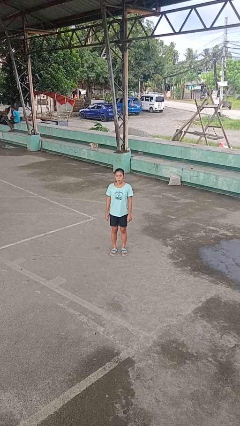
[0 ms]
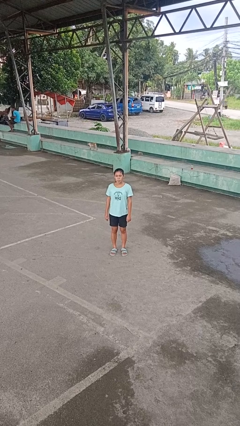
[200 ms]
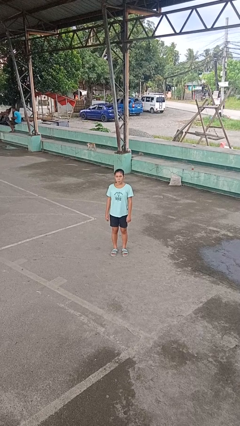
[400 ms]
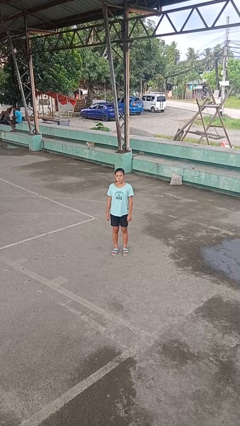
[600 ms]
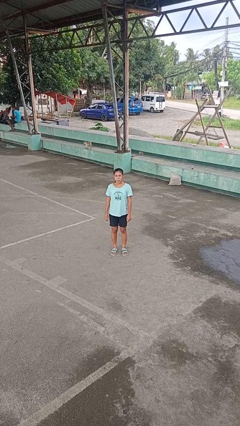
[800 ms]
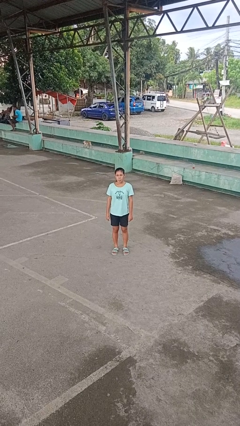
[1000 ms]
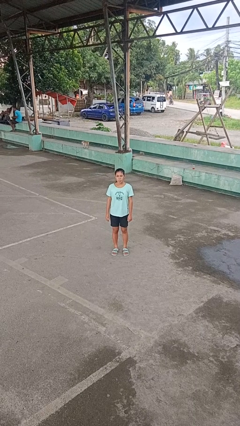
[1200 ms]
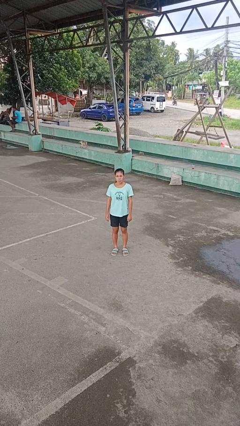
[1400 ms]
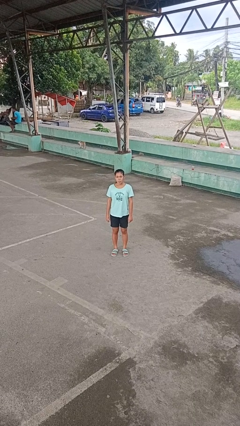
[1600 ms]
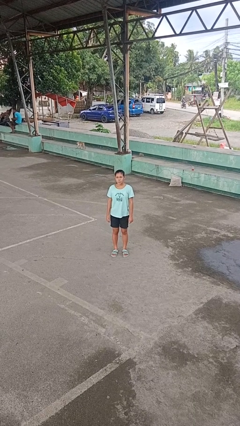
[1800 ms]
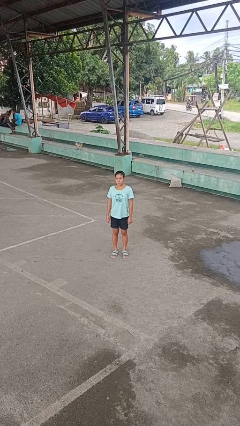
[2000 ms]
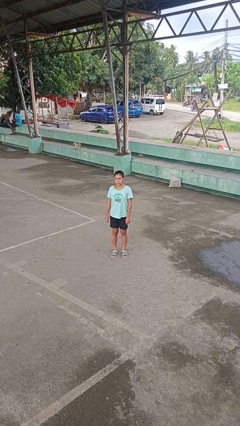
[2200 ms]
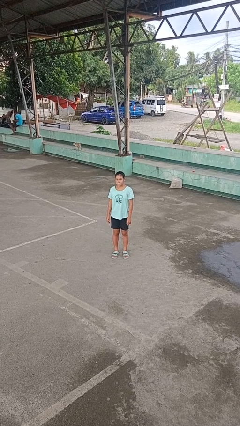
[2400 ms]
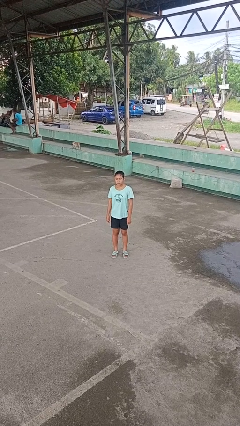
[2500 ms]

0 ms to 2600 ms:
person sticks out tongue

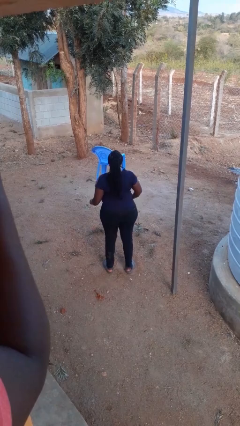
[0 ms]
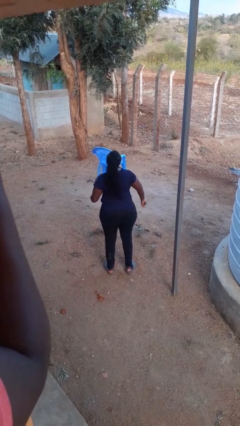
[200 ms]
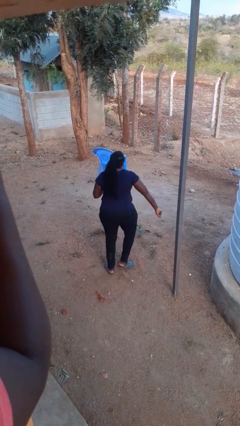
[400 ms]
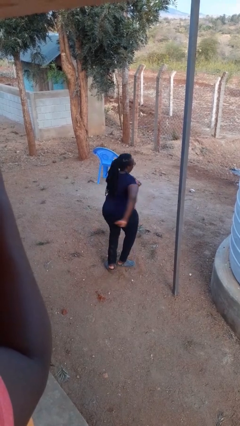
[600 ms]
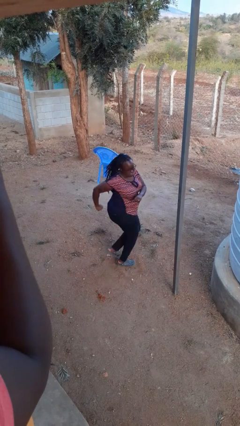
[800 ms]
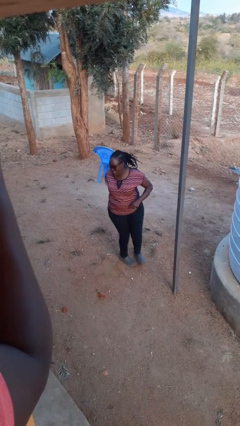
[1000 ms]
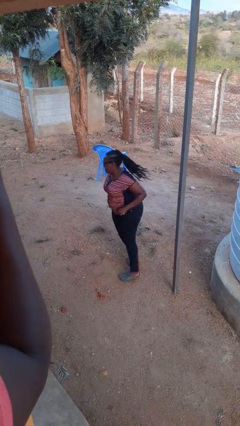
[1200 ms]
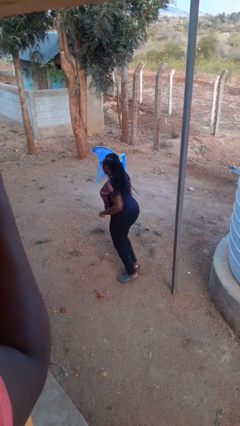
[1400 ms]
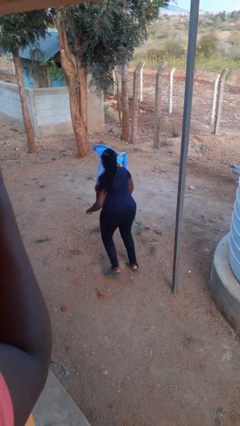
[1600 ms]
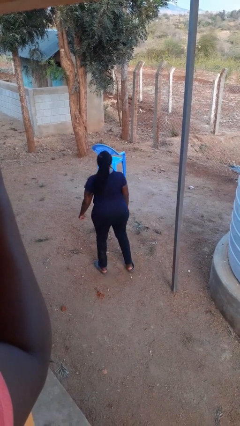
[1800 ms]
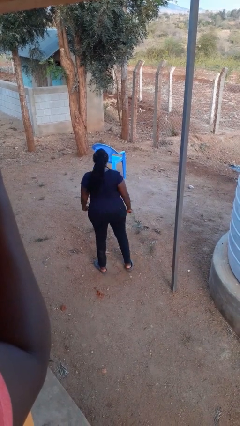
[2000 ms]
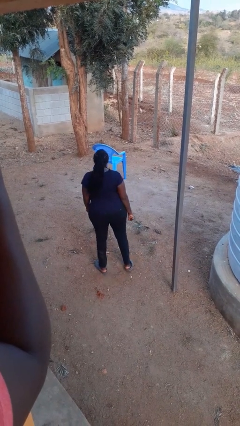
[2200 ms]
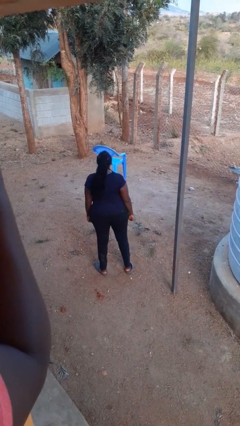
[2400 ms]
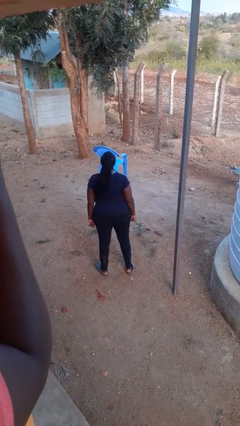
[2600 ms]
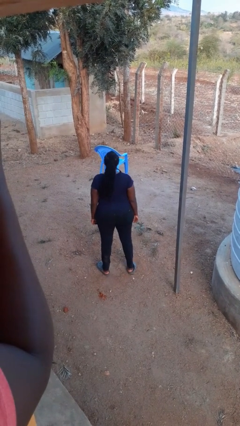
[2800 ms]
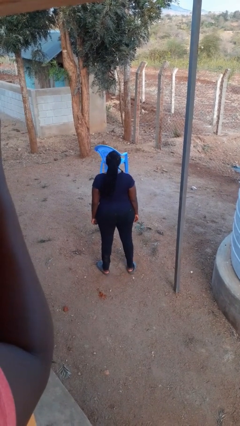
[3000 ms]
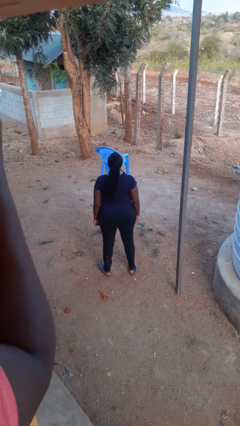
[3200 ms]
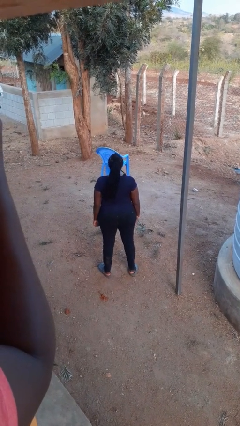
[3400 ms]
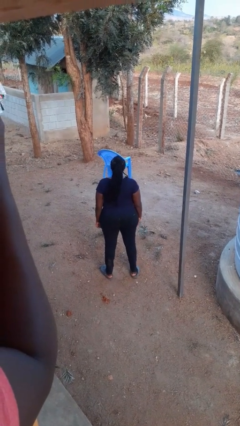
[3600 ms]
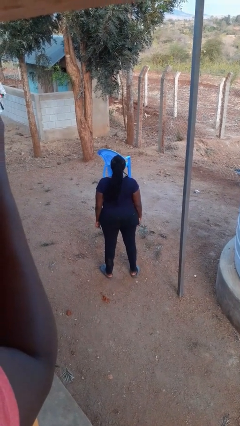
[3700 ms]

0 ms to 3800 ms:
person twirls

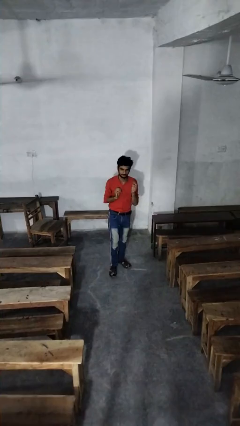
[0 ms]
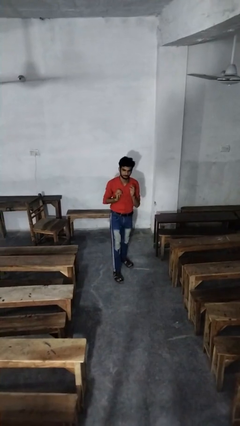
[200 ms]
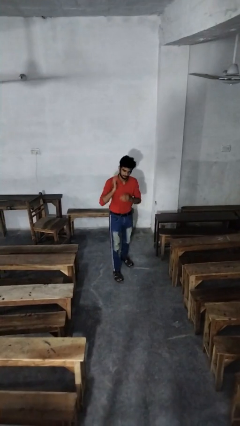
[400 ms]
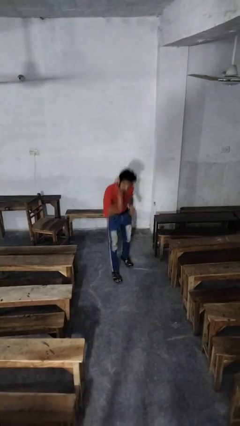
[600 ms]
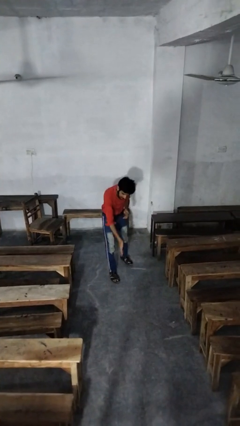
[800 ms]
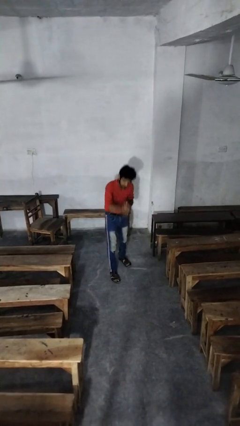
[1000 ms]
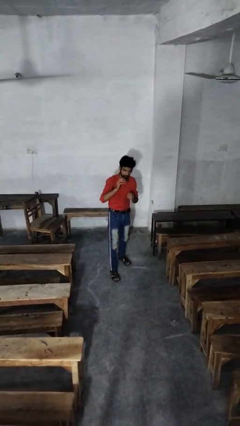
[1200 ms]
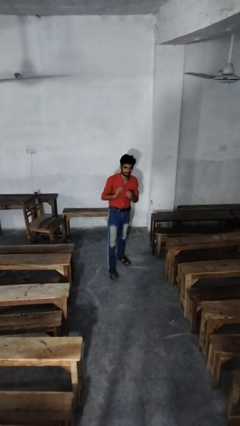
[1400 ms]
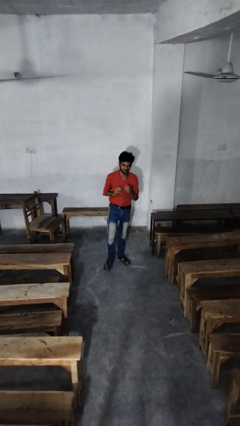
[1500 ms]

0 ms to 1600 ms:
person karate chop

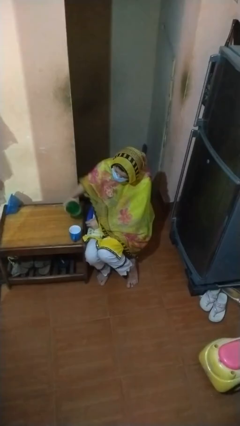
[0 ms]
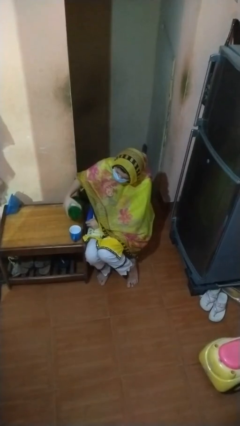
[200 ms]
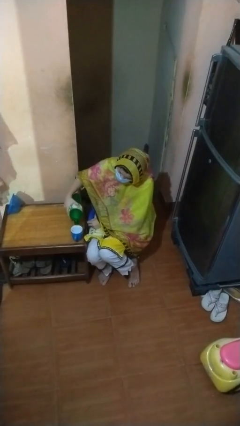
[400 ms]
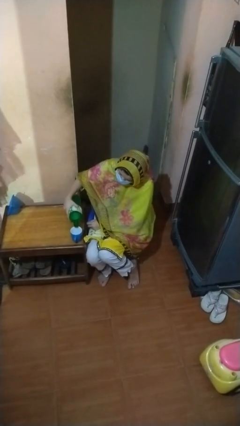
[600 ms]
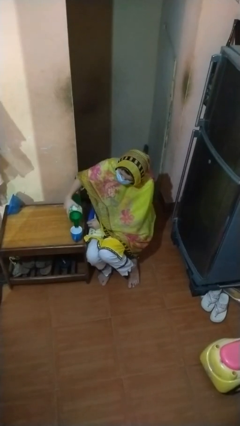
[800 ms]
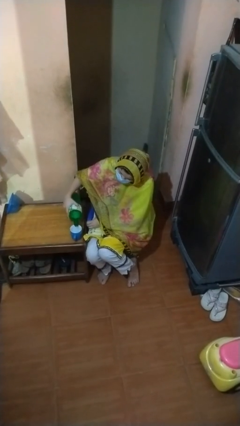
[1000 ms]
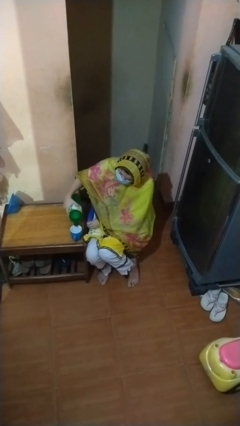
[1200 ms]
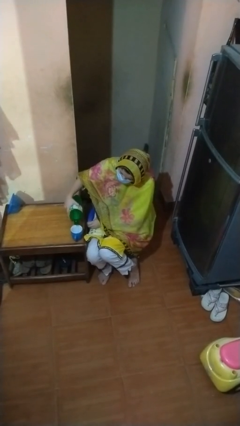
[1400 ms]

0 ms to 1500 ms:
person pours liquid into cup

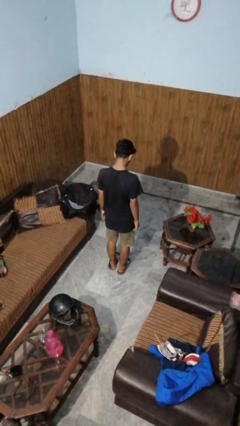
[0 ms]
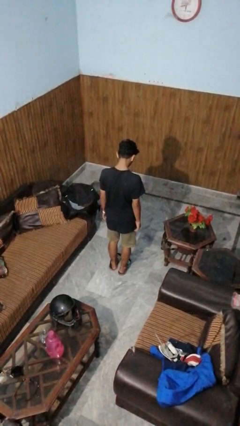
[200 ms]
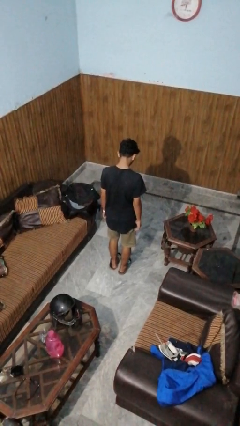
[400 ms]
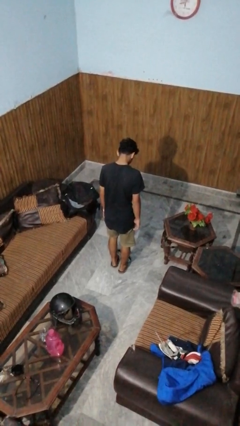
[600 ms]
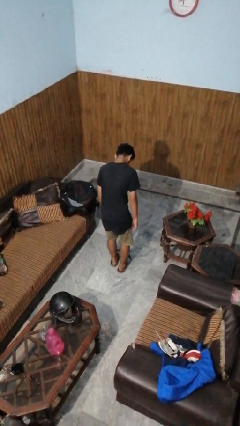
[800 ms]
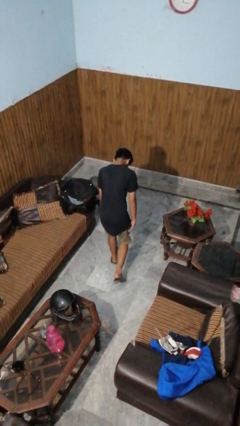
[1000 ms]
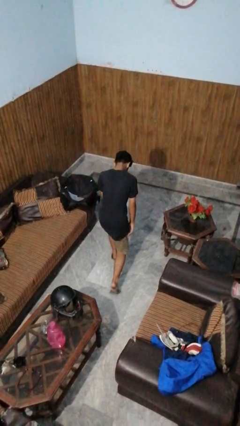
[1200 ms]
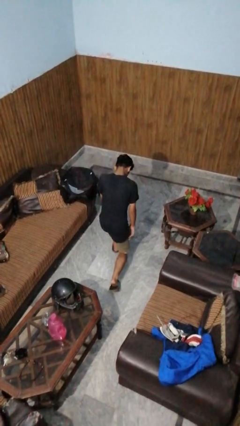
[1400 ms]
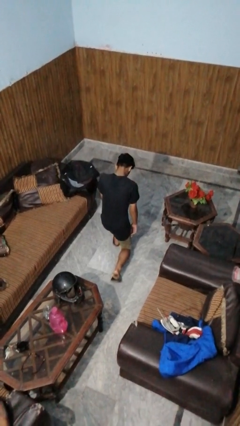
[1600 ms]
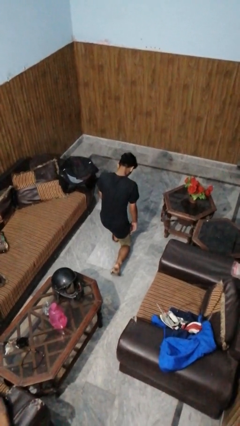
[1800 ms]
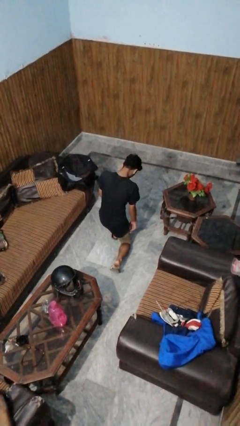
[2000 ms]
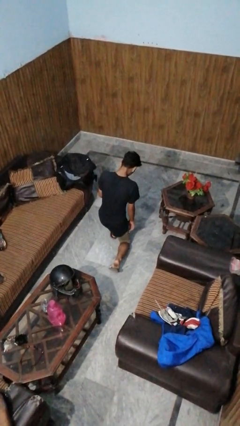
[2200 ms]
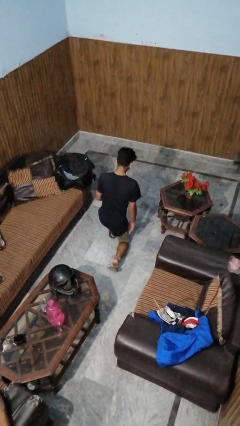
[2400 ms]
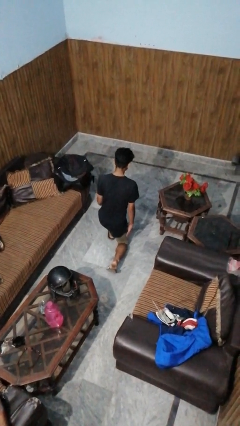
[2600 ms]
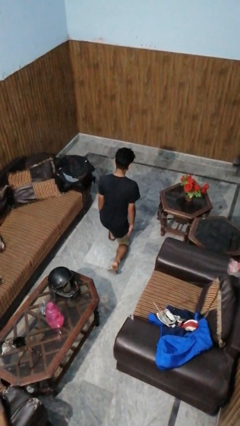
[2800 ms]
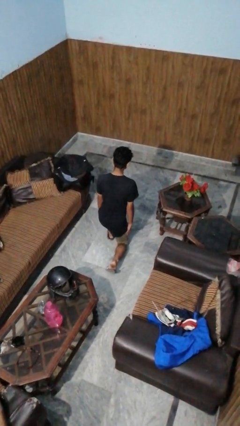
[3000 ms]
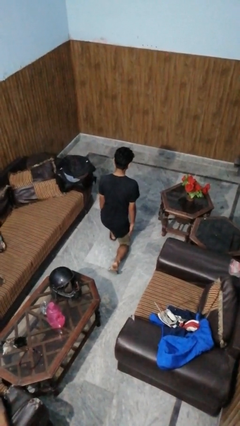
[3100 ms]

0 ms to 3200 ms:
person kneels

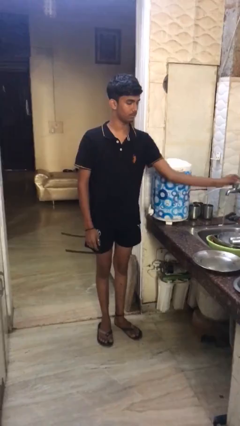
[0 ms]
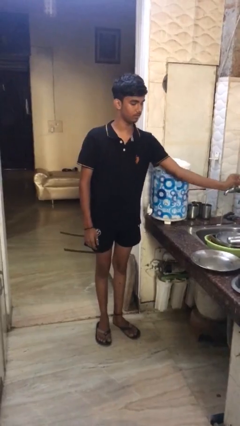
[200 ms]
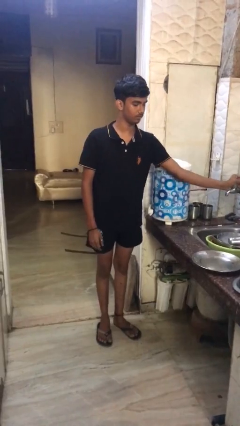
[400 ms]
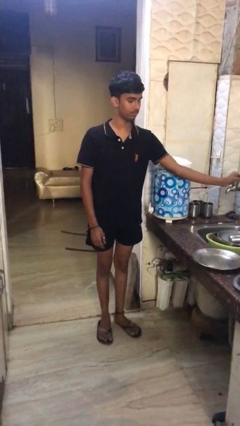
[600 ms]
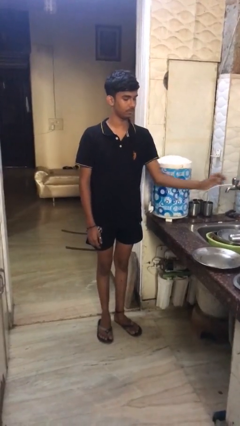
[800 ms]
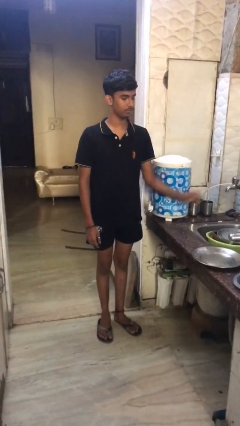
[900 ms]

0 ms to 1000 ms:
person turns off faucet

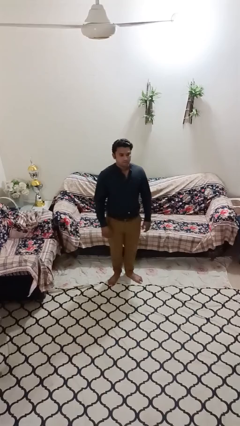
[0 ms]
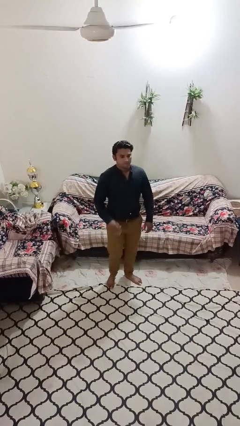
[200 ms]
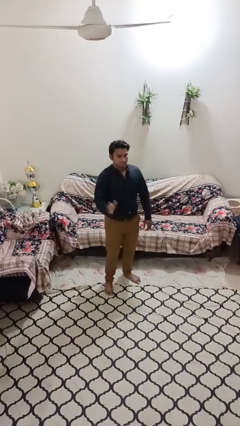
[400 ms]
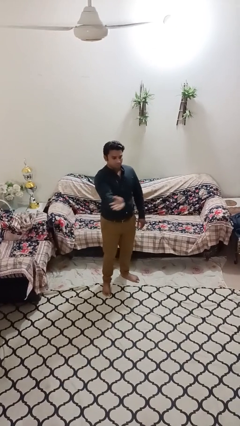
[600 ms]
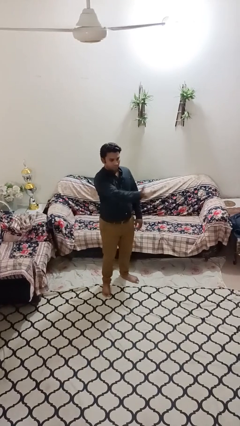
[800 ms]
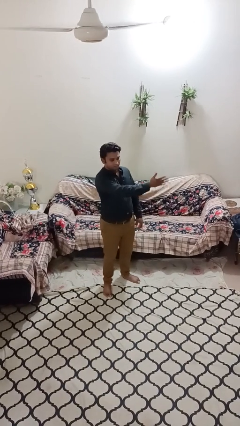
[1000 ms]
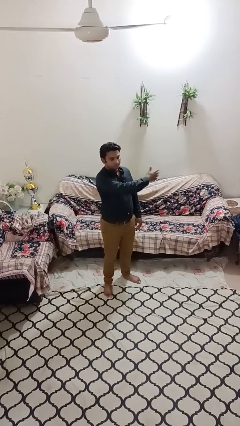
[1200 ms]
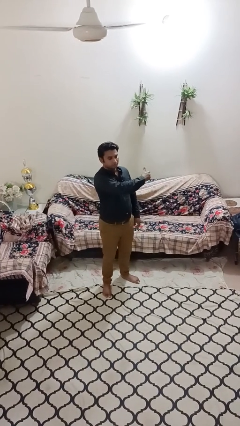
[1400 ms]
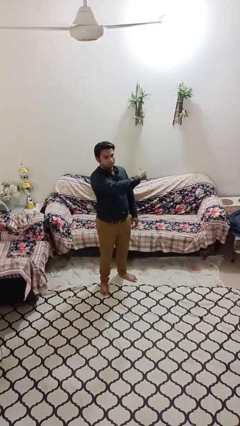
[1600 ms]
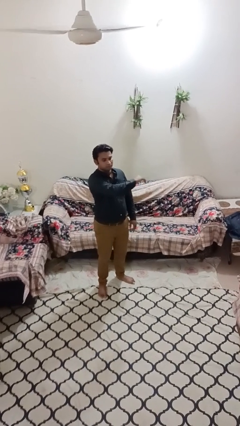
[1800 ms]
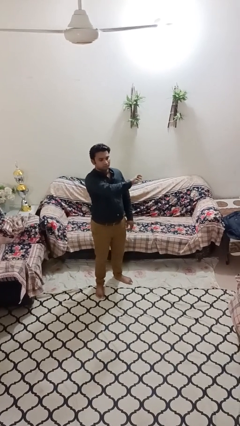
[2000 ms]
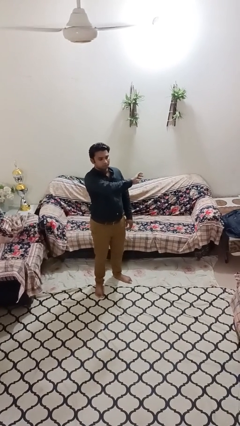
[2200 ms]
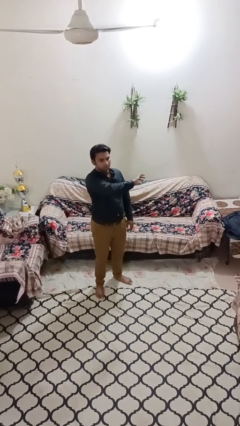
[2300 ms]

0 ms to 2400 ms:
person gestures swipe left

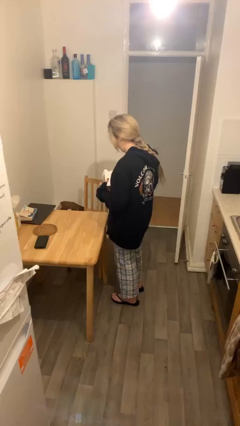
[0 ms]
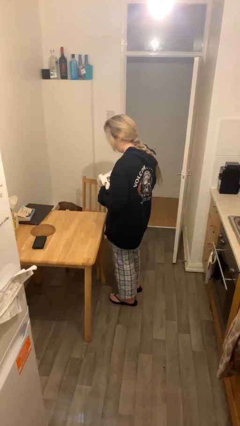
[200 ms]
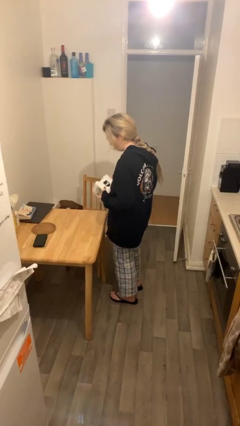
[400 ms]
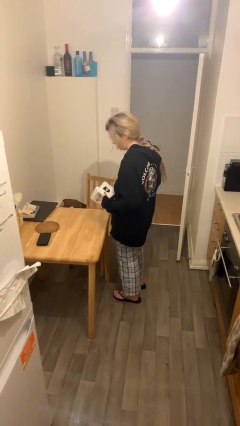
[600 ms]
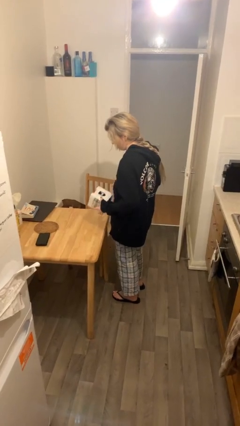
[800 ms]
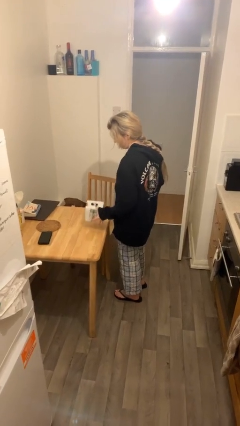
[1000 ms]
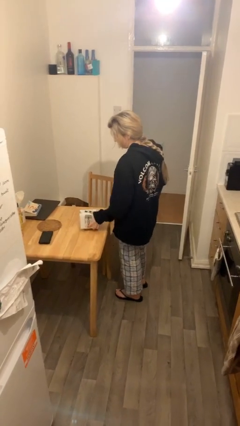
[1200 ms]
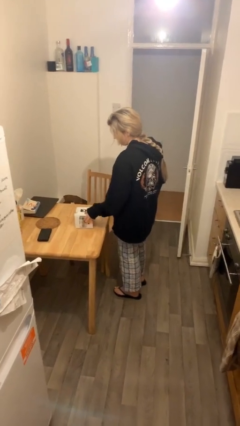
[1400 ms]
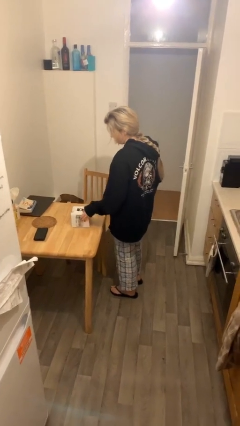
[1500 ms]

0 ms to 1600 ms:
person puts down object on table
